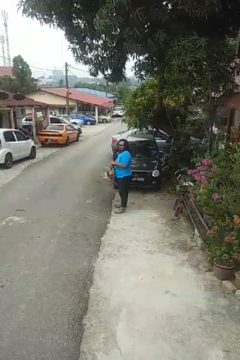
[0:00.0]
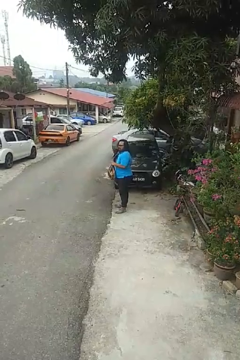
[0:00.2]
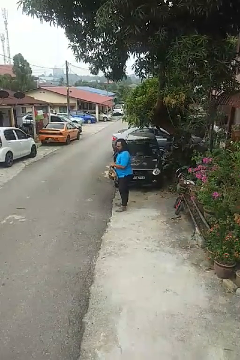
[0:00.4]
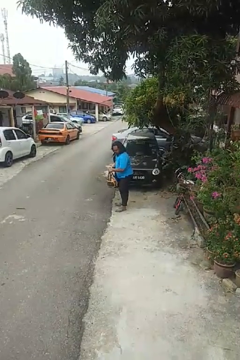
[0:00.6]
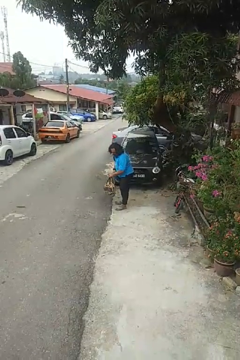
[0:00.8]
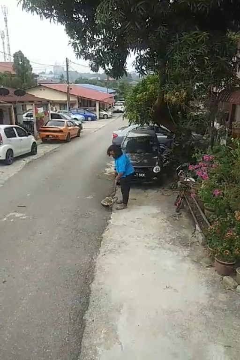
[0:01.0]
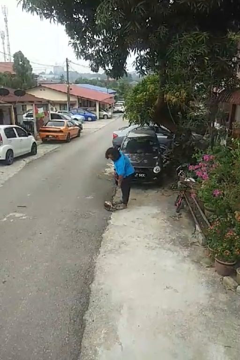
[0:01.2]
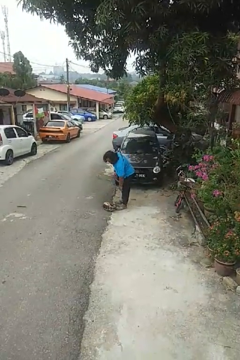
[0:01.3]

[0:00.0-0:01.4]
person drops object

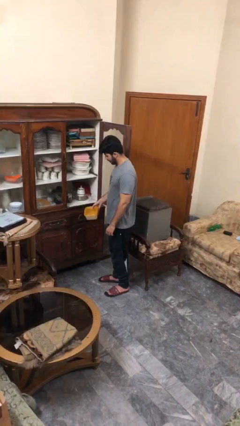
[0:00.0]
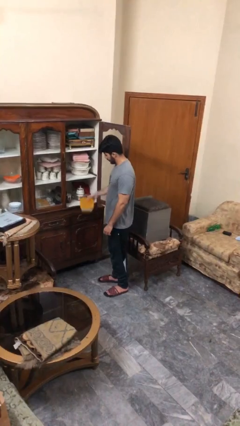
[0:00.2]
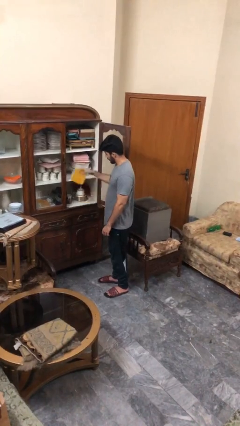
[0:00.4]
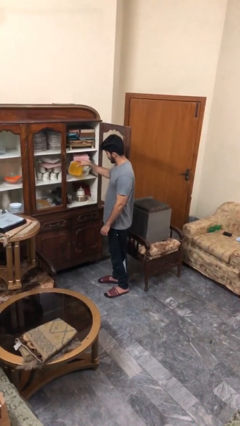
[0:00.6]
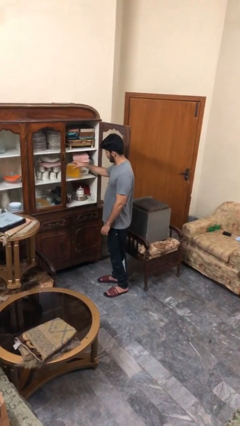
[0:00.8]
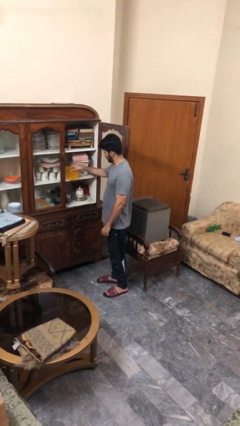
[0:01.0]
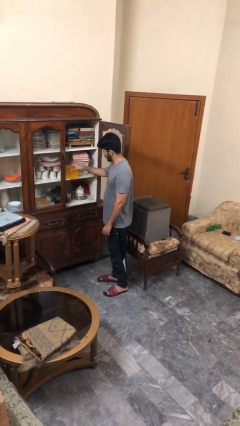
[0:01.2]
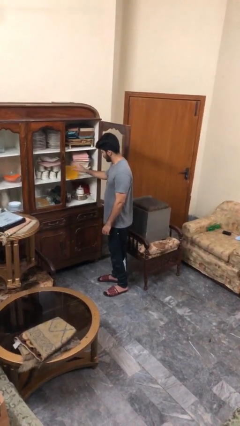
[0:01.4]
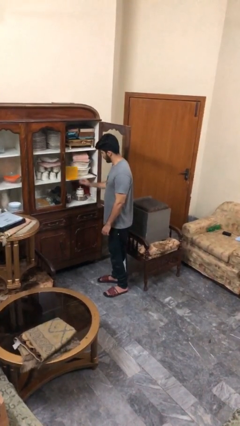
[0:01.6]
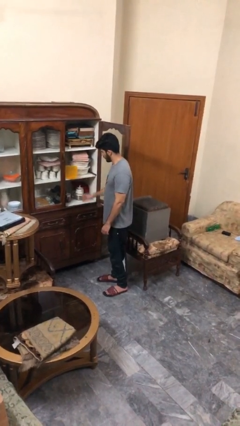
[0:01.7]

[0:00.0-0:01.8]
person puts down object into cabinet

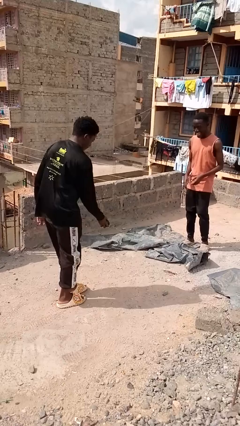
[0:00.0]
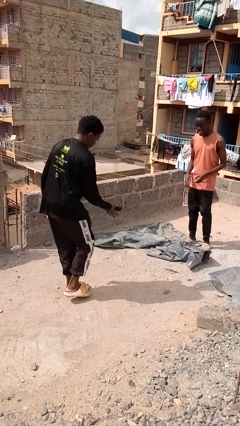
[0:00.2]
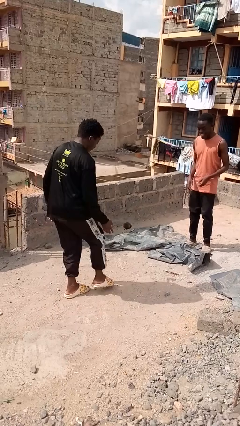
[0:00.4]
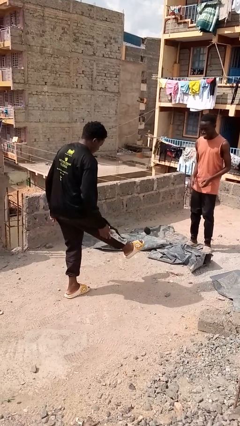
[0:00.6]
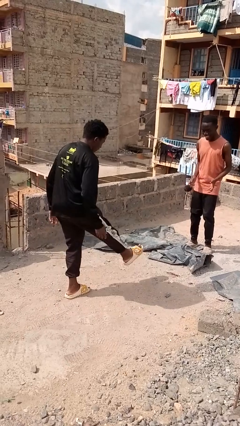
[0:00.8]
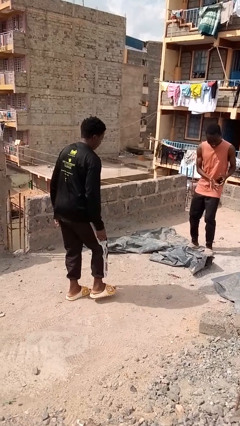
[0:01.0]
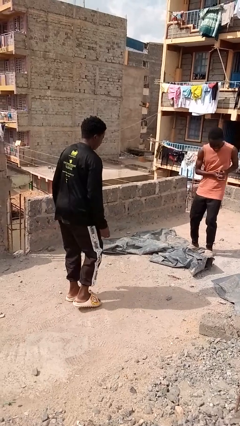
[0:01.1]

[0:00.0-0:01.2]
person kicks object to person

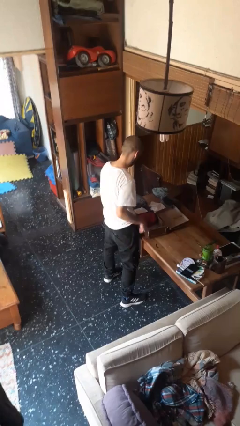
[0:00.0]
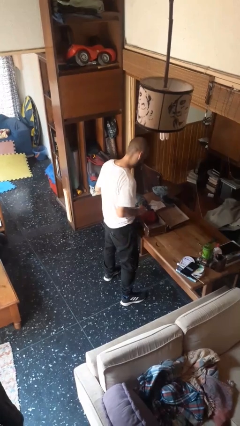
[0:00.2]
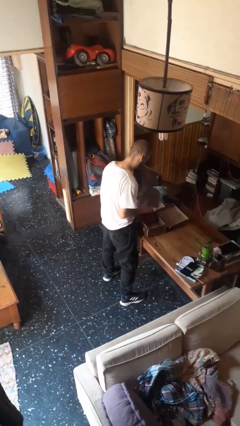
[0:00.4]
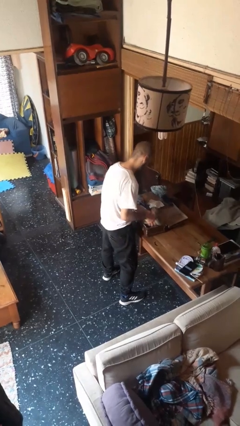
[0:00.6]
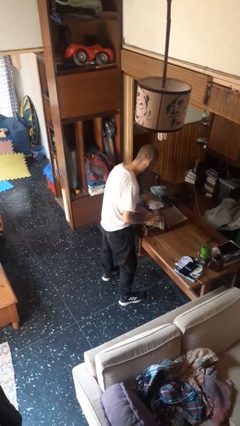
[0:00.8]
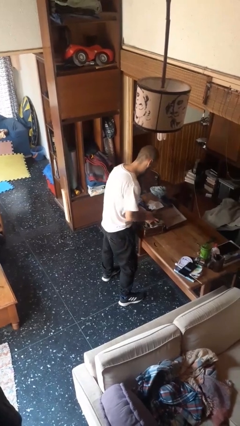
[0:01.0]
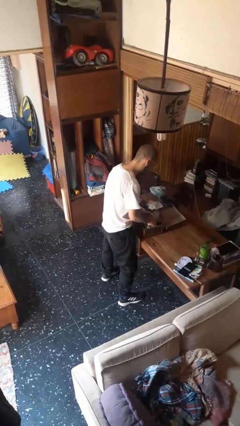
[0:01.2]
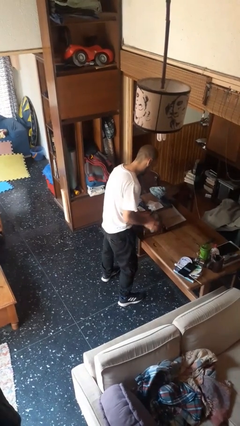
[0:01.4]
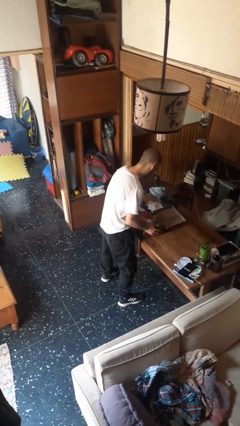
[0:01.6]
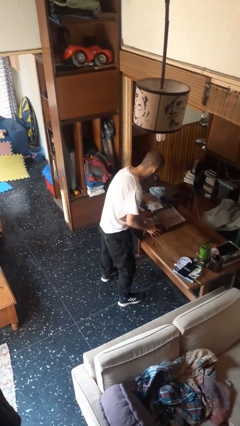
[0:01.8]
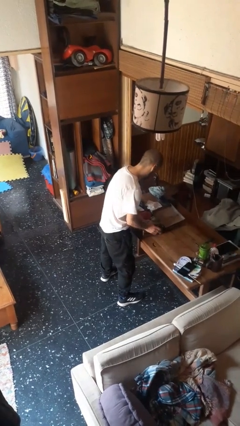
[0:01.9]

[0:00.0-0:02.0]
person loads clothes into suitcase

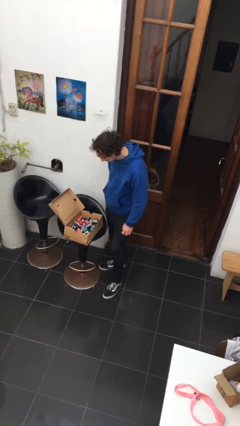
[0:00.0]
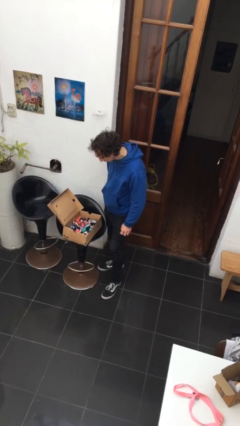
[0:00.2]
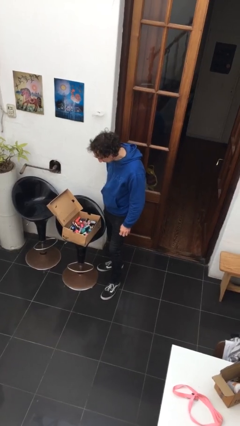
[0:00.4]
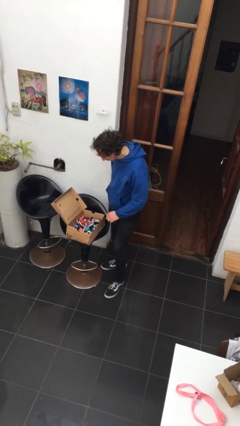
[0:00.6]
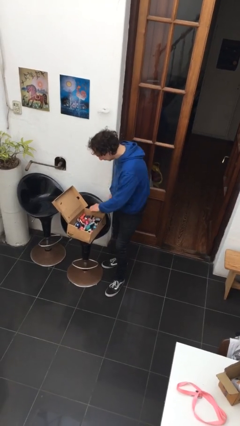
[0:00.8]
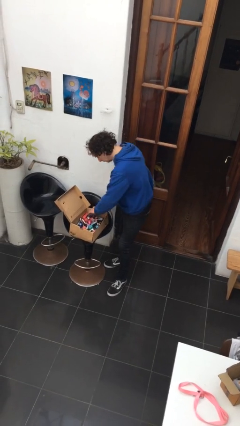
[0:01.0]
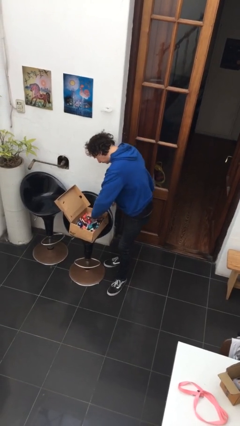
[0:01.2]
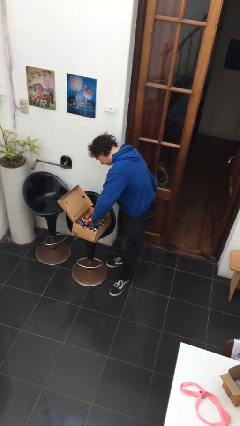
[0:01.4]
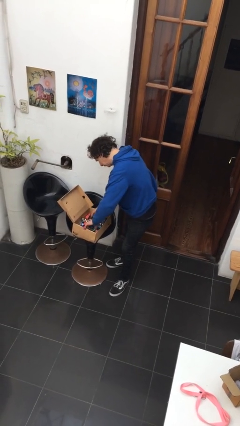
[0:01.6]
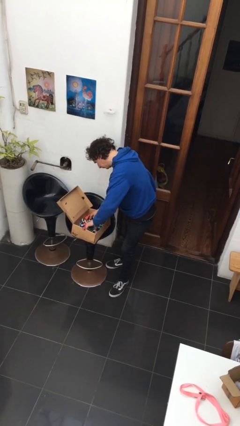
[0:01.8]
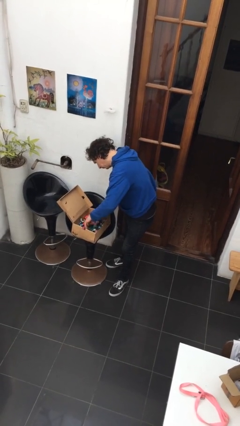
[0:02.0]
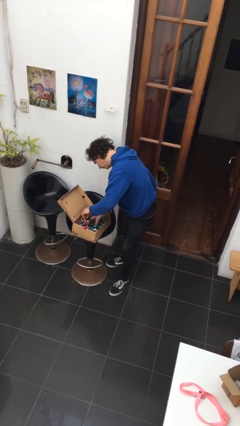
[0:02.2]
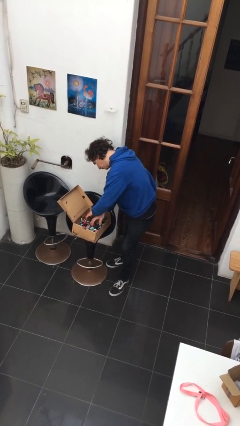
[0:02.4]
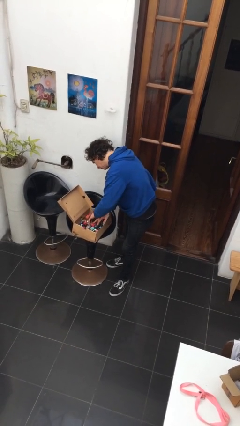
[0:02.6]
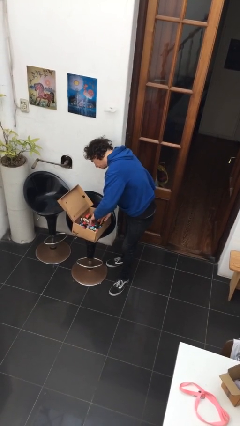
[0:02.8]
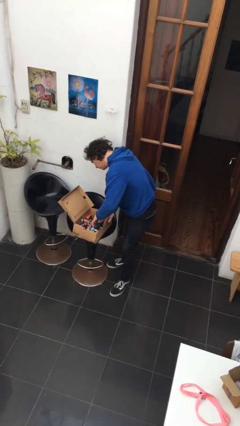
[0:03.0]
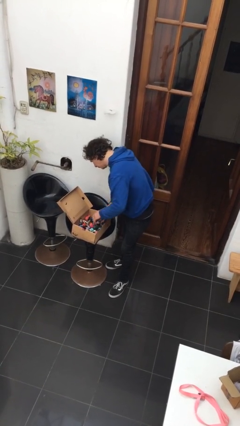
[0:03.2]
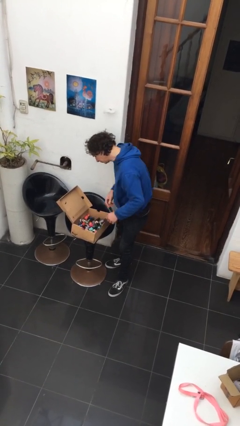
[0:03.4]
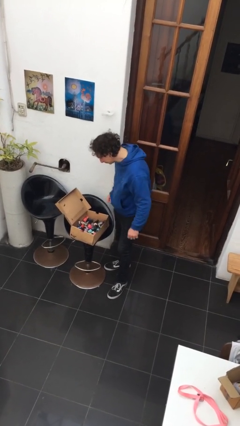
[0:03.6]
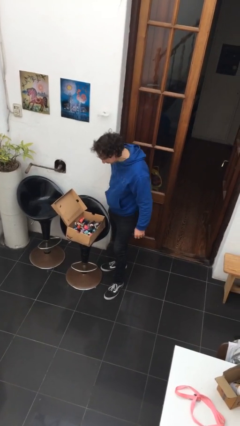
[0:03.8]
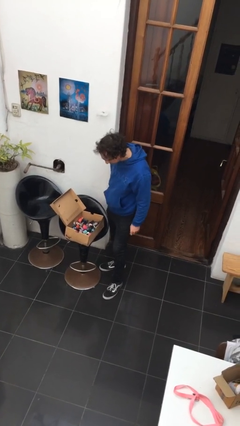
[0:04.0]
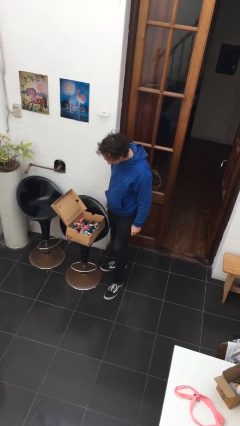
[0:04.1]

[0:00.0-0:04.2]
person searches in box

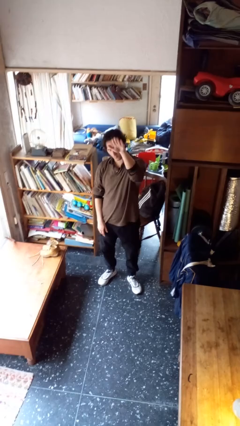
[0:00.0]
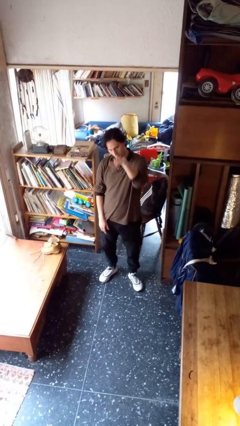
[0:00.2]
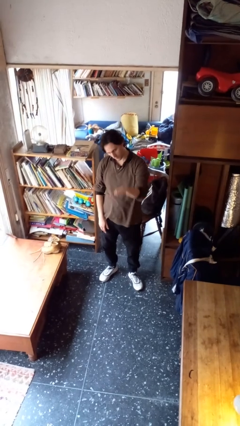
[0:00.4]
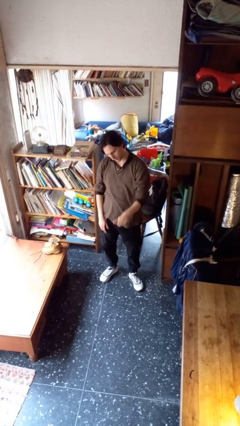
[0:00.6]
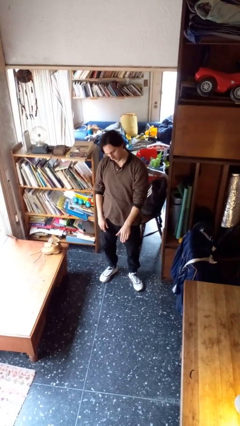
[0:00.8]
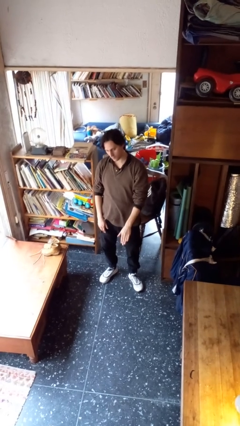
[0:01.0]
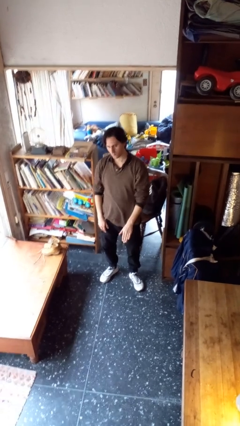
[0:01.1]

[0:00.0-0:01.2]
person gestures swipe down

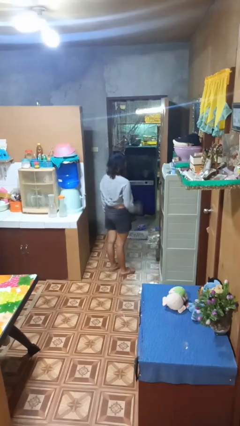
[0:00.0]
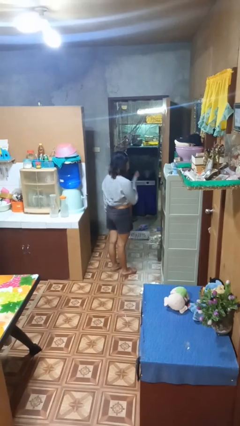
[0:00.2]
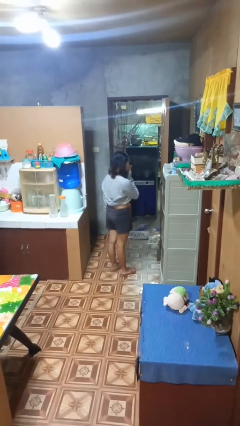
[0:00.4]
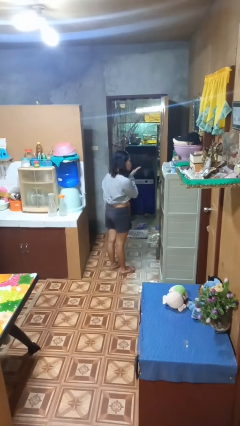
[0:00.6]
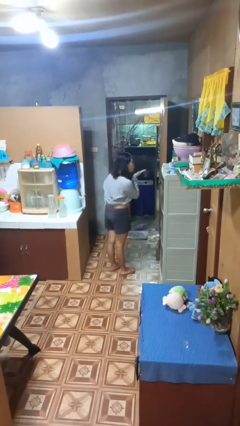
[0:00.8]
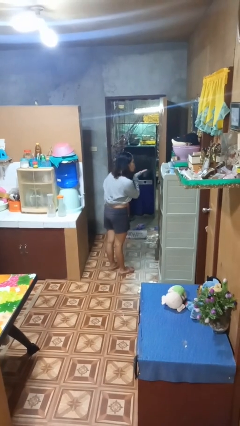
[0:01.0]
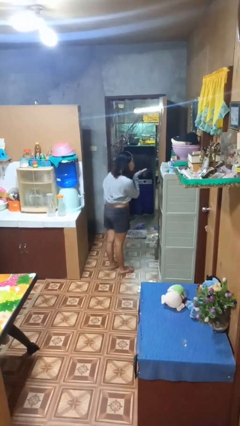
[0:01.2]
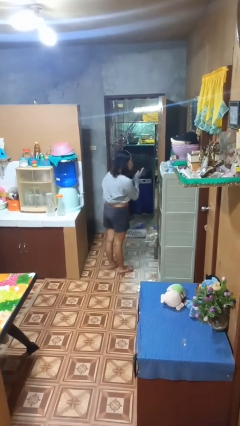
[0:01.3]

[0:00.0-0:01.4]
person gestures blow kiss

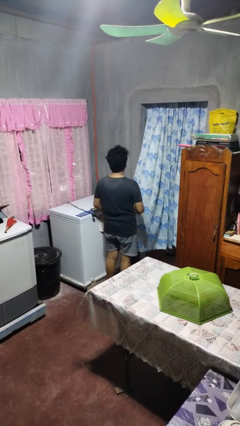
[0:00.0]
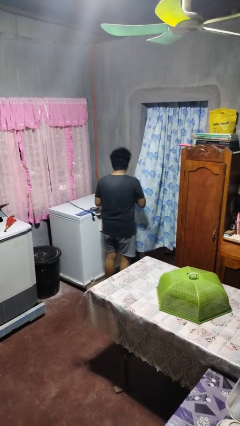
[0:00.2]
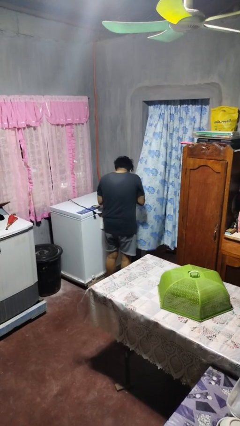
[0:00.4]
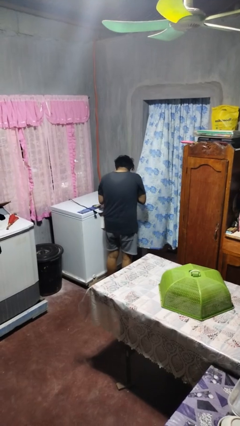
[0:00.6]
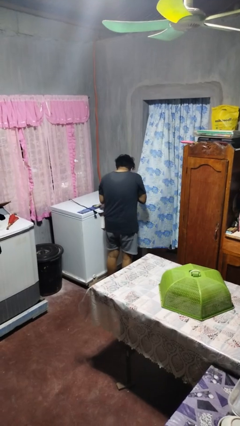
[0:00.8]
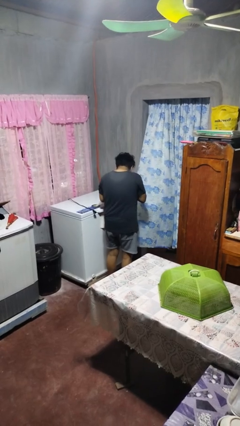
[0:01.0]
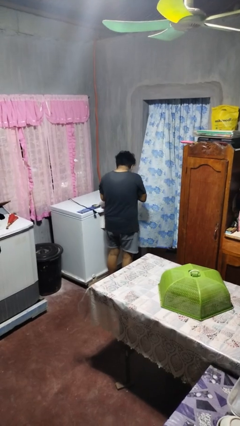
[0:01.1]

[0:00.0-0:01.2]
person sneezes into hand

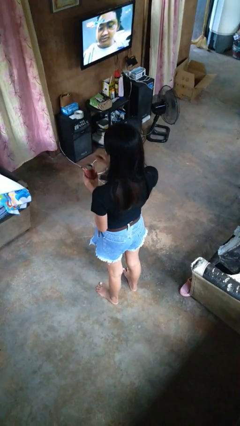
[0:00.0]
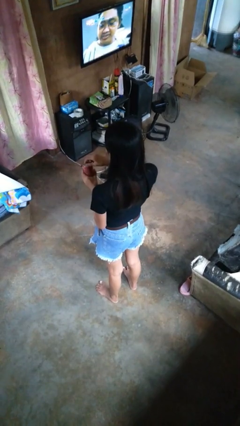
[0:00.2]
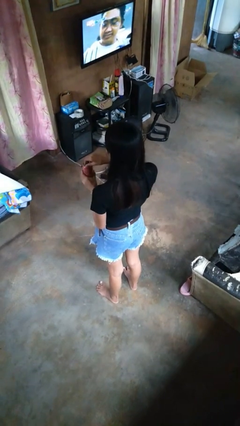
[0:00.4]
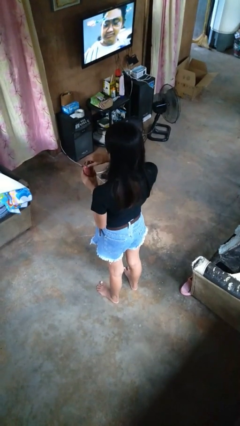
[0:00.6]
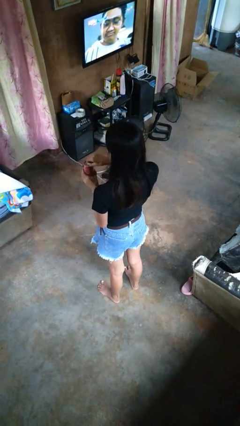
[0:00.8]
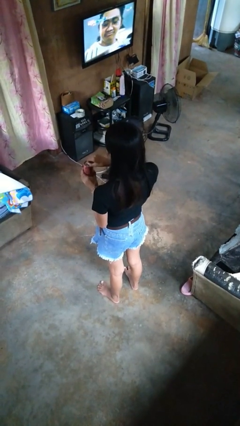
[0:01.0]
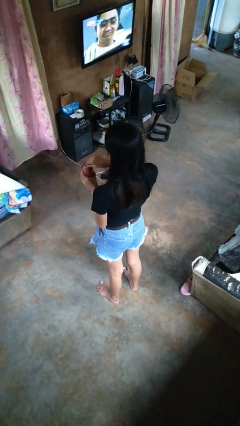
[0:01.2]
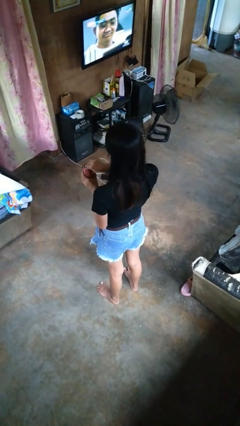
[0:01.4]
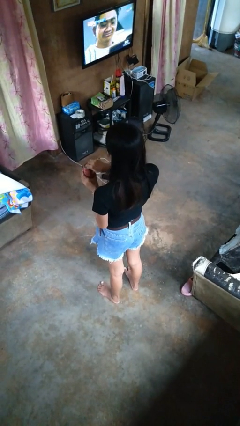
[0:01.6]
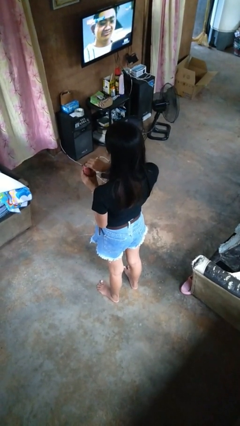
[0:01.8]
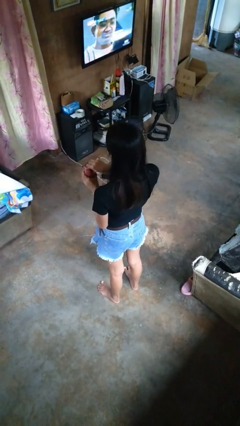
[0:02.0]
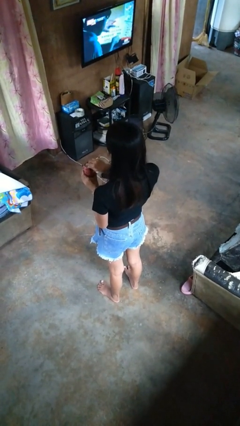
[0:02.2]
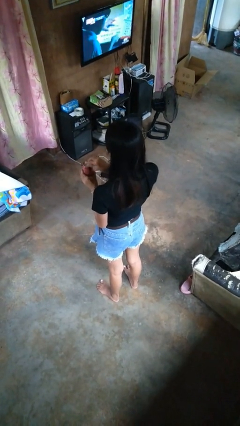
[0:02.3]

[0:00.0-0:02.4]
person opens beverage can
